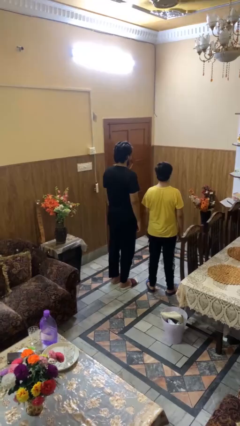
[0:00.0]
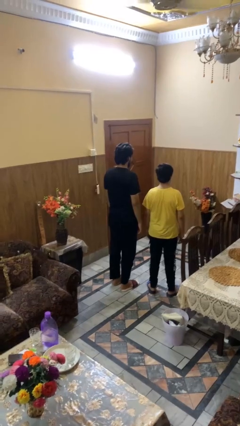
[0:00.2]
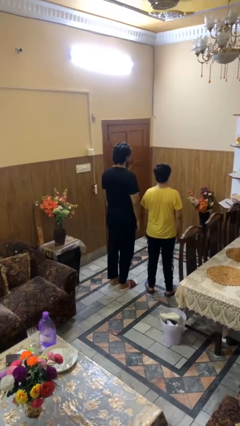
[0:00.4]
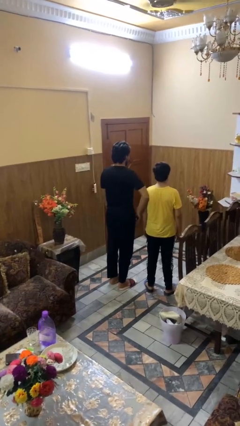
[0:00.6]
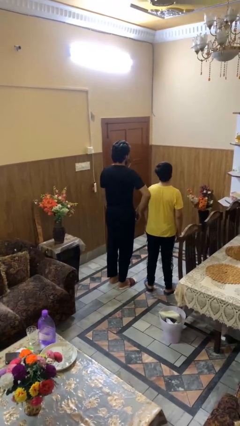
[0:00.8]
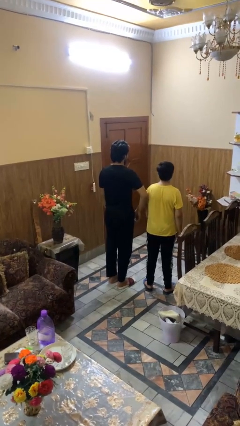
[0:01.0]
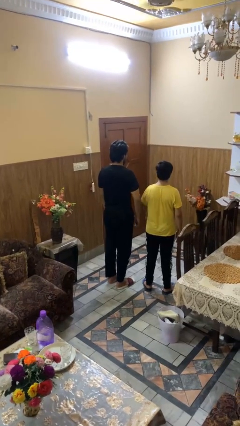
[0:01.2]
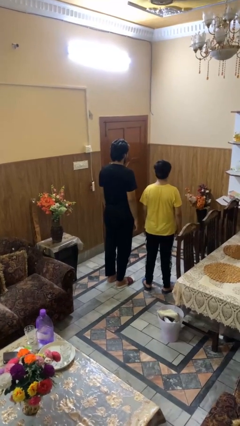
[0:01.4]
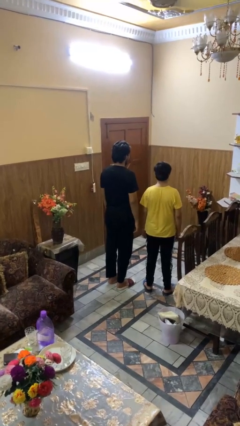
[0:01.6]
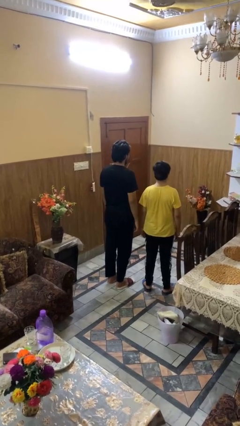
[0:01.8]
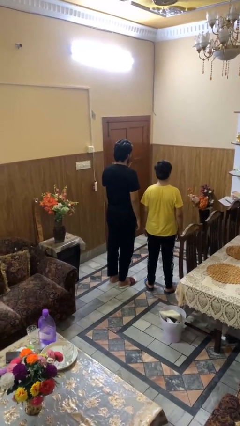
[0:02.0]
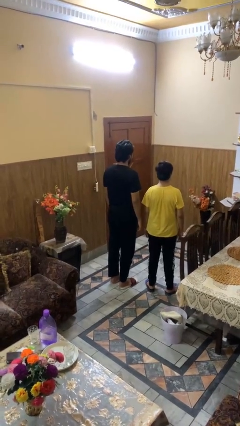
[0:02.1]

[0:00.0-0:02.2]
person nudges person with elbow

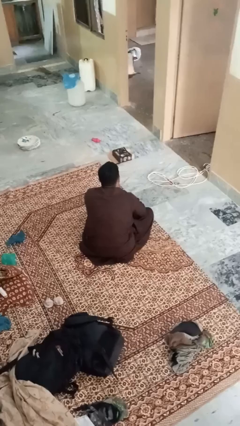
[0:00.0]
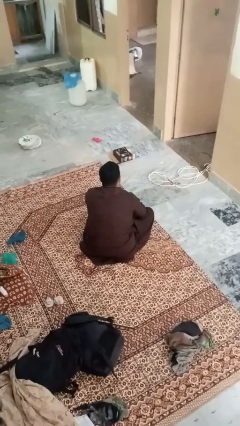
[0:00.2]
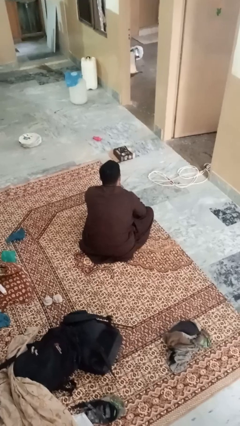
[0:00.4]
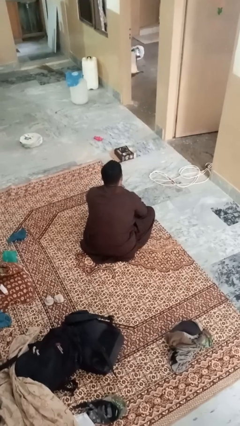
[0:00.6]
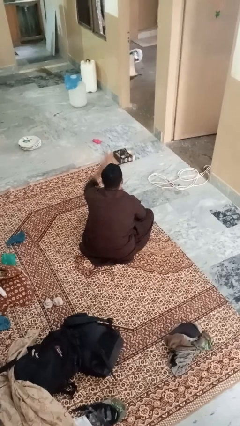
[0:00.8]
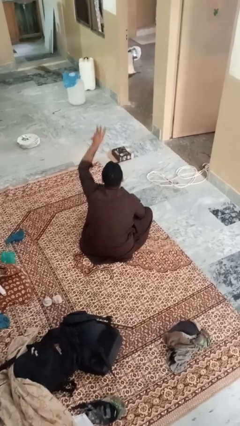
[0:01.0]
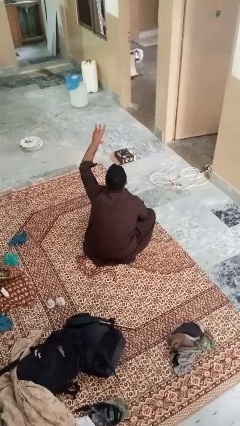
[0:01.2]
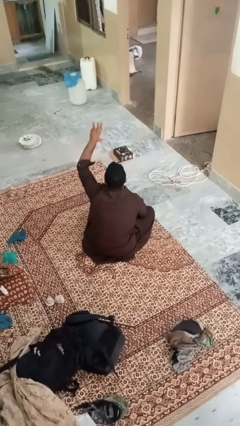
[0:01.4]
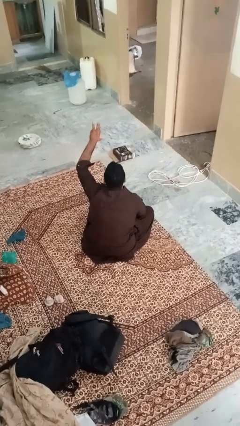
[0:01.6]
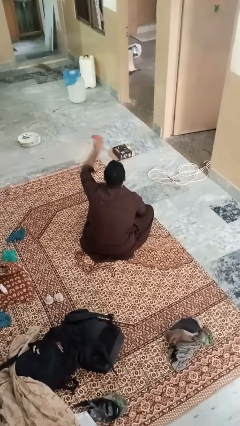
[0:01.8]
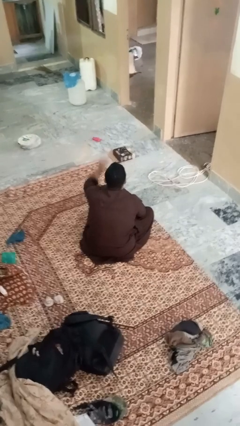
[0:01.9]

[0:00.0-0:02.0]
person gestures number three

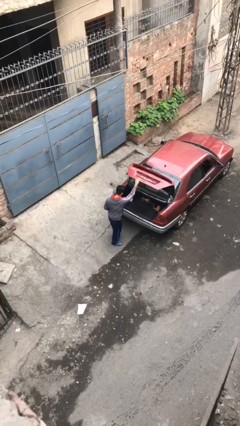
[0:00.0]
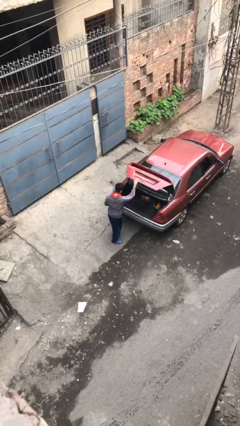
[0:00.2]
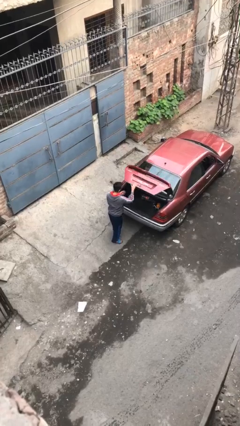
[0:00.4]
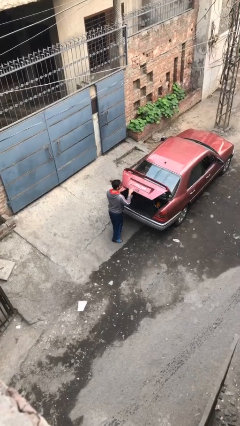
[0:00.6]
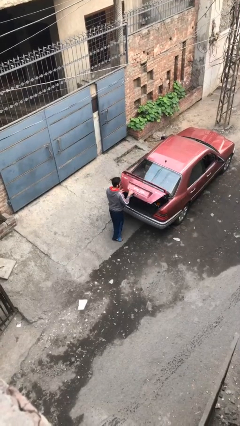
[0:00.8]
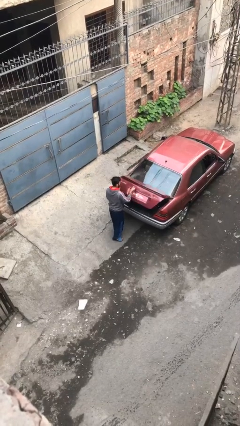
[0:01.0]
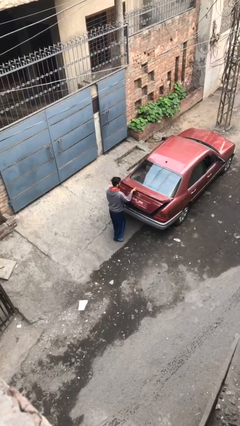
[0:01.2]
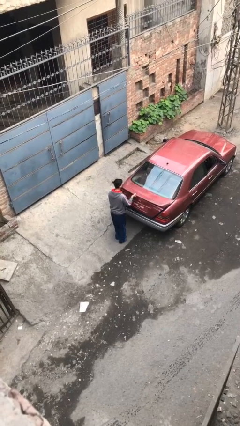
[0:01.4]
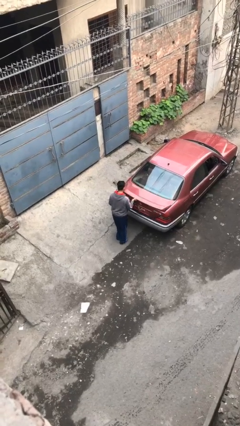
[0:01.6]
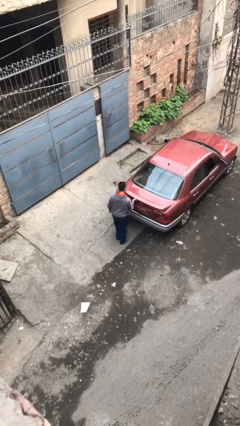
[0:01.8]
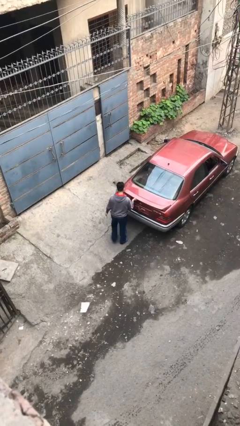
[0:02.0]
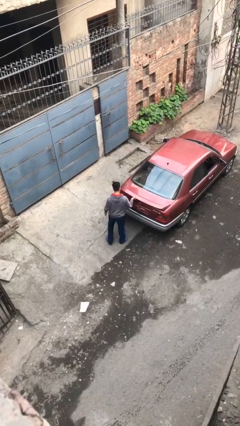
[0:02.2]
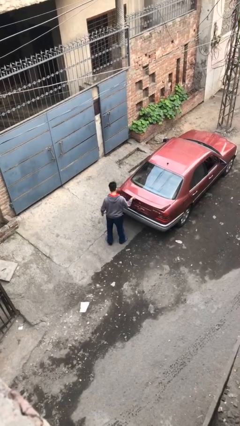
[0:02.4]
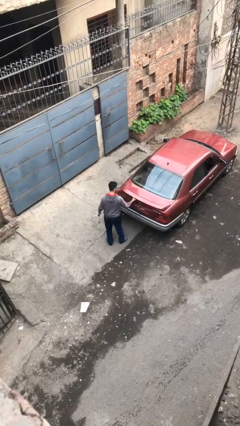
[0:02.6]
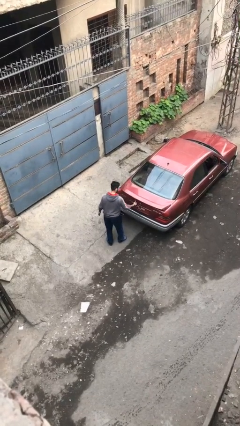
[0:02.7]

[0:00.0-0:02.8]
person closes car trunk

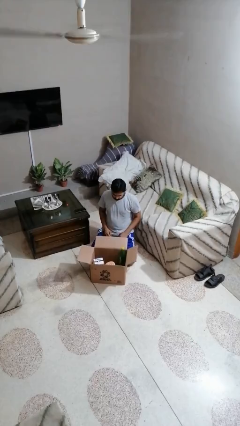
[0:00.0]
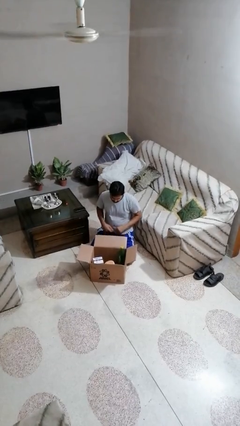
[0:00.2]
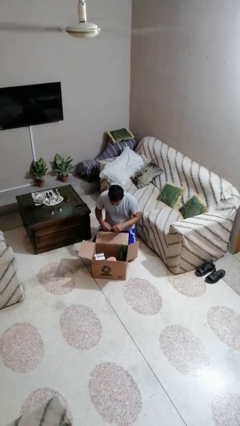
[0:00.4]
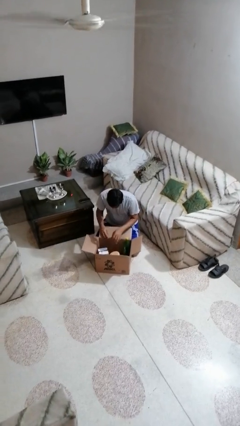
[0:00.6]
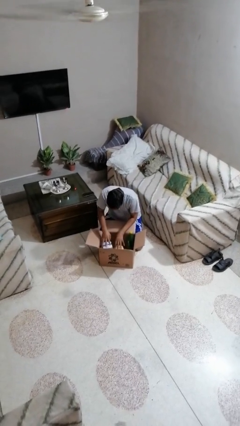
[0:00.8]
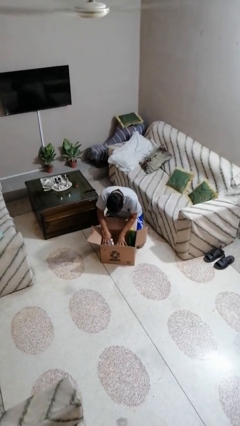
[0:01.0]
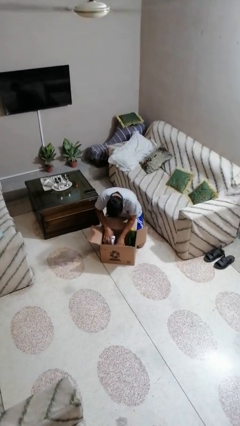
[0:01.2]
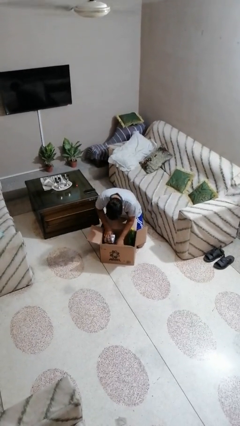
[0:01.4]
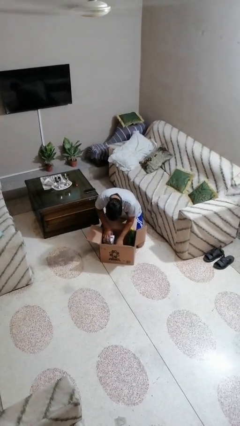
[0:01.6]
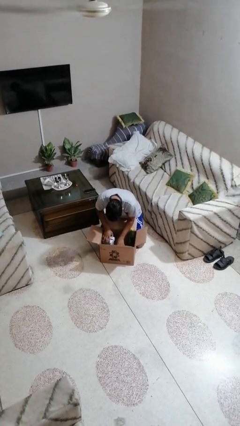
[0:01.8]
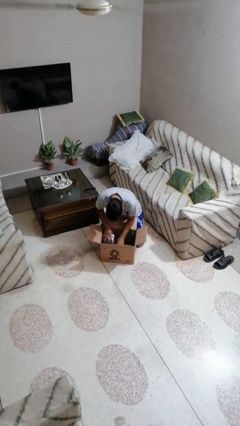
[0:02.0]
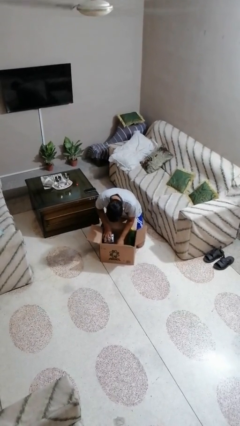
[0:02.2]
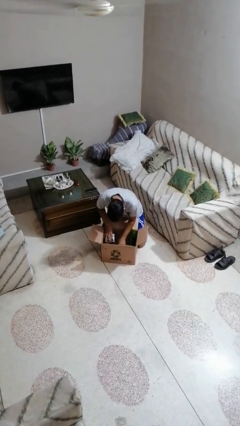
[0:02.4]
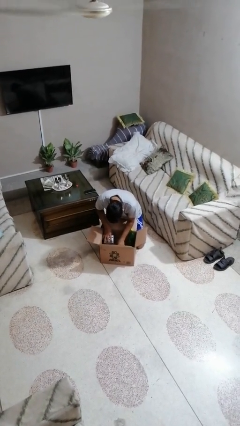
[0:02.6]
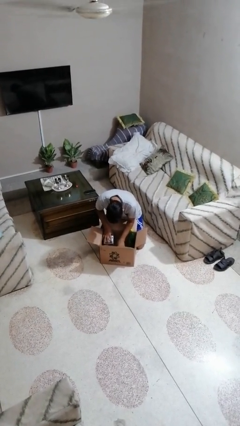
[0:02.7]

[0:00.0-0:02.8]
person searches in box

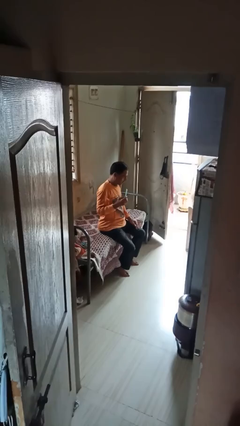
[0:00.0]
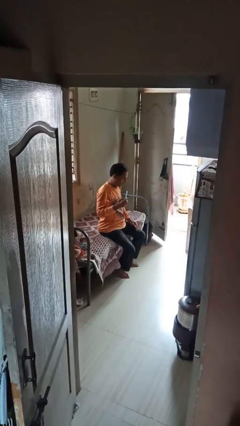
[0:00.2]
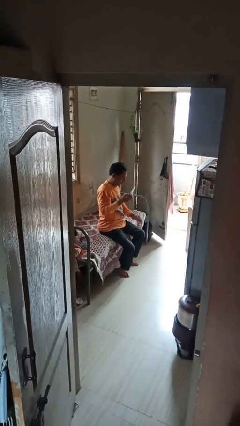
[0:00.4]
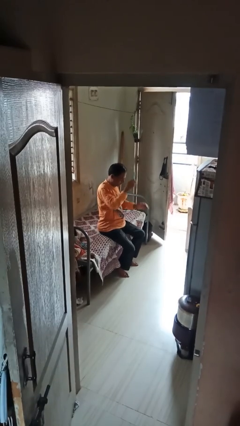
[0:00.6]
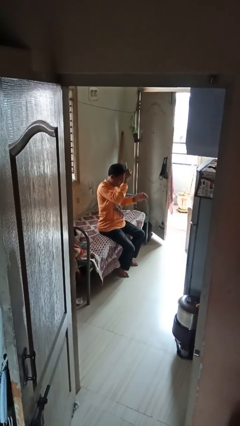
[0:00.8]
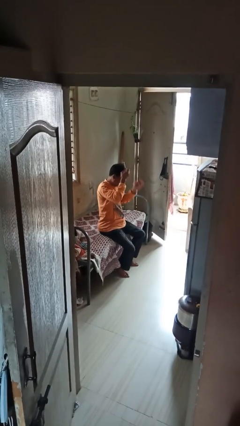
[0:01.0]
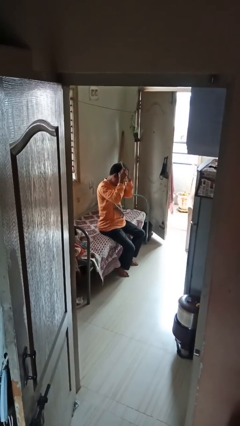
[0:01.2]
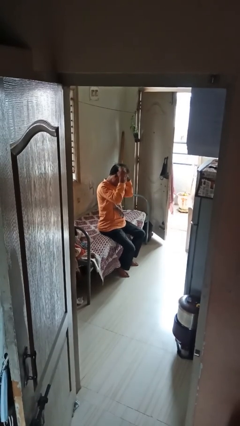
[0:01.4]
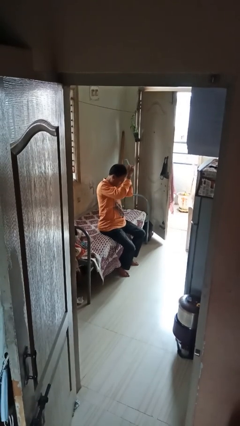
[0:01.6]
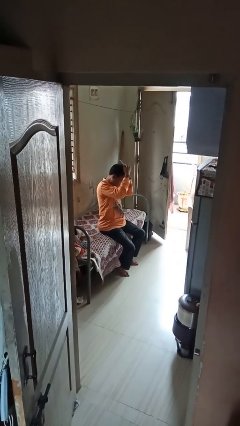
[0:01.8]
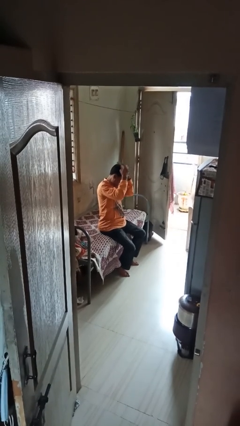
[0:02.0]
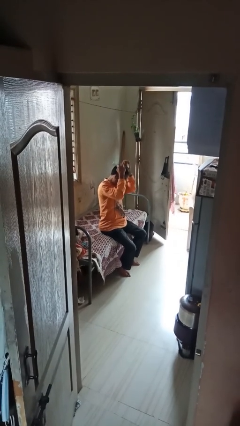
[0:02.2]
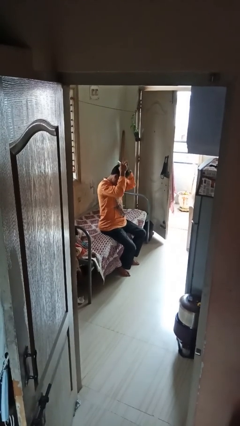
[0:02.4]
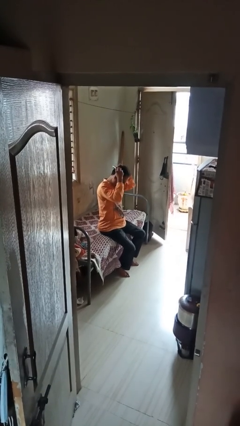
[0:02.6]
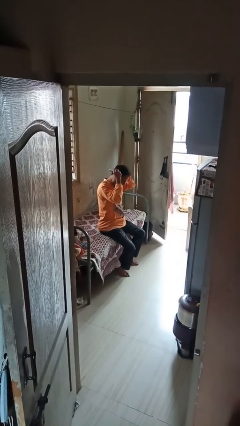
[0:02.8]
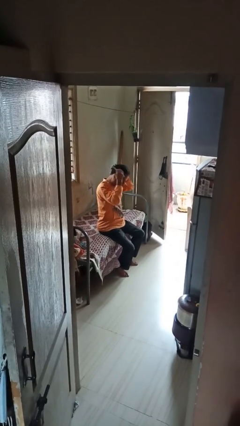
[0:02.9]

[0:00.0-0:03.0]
person brushes hair

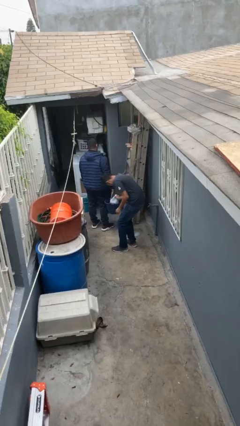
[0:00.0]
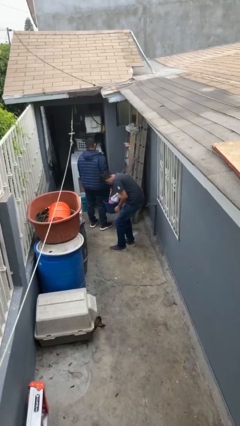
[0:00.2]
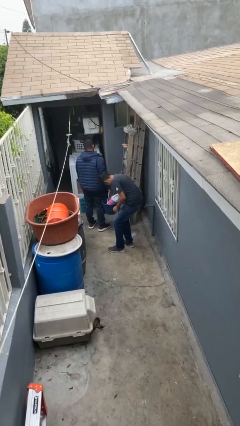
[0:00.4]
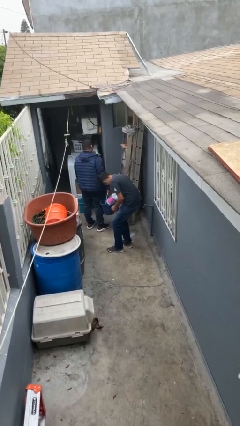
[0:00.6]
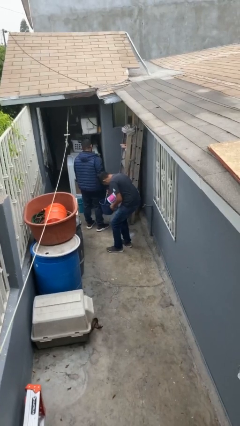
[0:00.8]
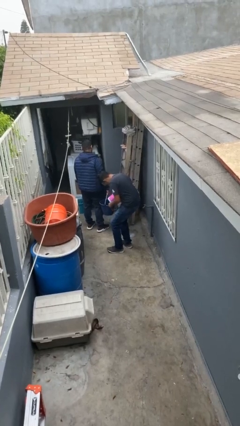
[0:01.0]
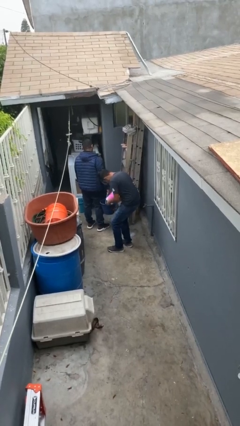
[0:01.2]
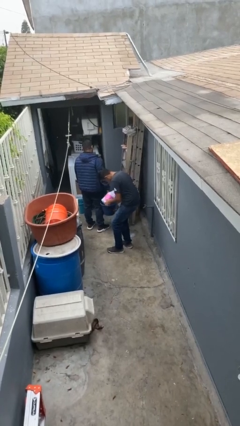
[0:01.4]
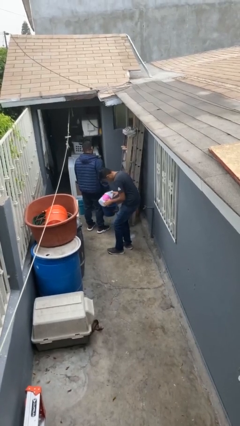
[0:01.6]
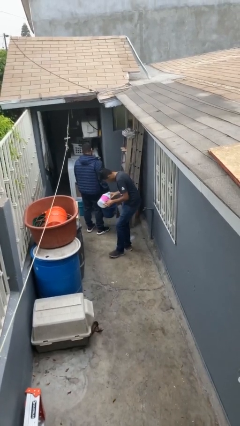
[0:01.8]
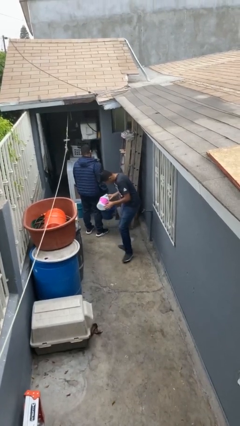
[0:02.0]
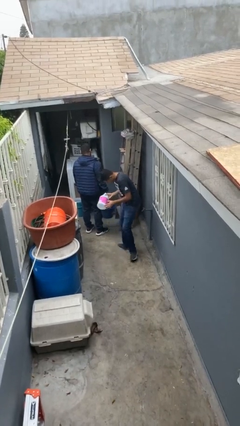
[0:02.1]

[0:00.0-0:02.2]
person steals object from person

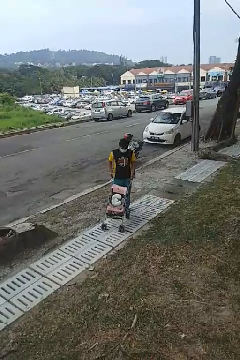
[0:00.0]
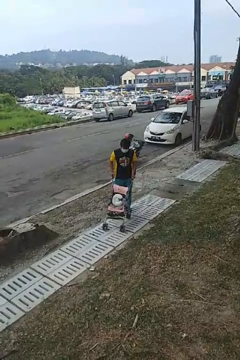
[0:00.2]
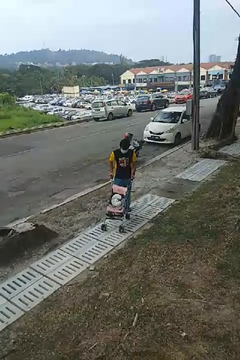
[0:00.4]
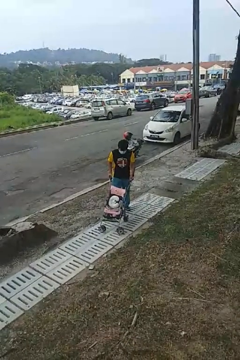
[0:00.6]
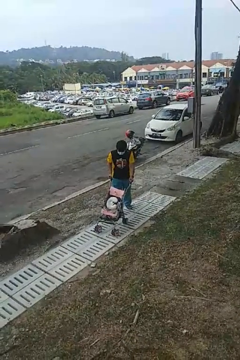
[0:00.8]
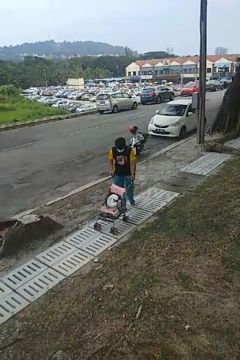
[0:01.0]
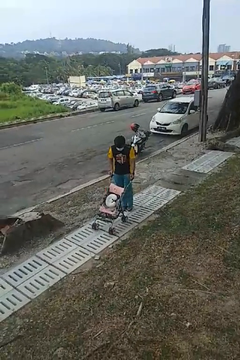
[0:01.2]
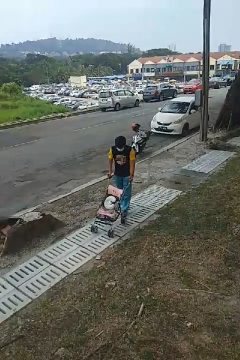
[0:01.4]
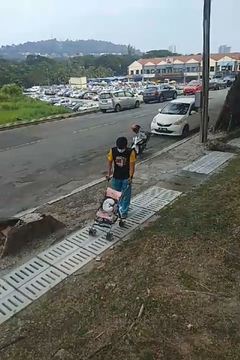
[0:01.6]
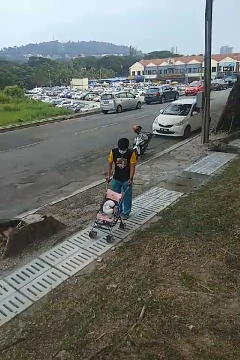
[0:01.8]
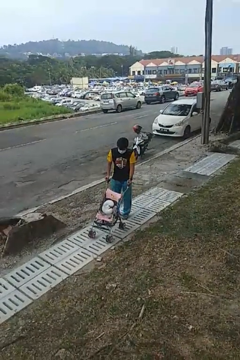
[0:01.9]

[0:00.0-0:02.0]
person pushes wheeled cart
